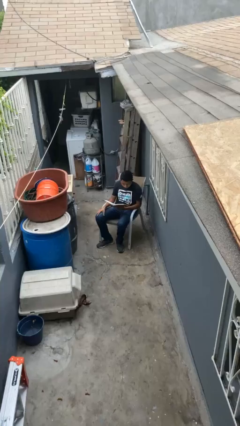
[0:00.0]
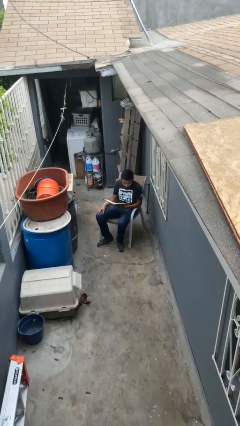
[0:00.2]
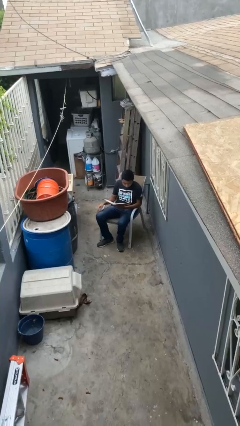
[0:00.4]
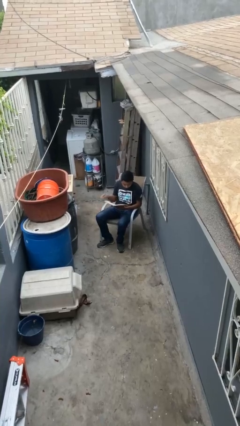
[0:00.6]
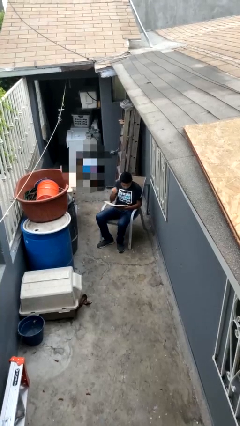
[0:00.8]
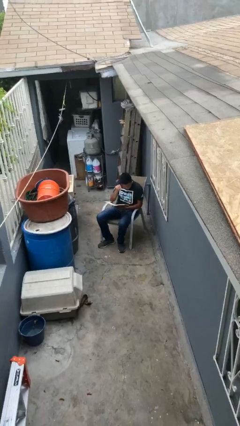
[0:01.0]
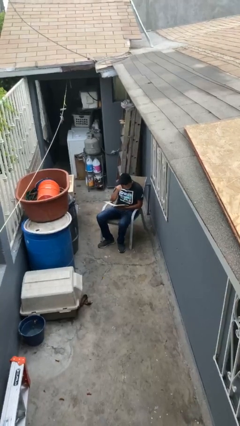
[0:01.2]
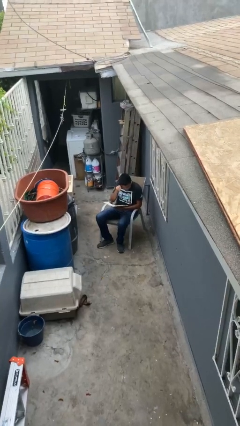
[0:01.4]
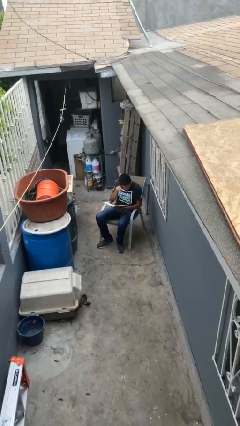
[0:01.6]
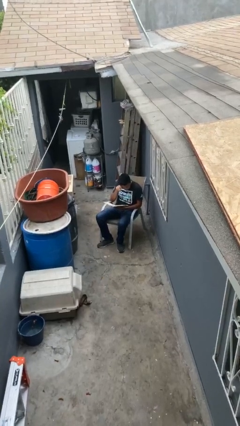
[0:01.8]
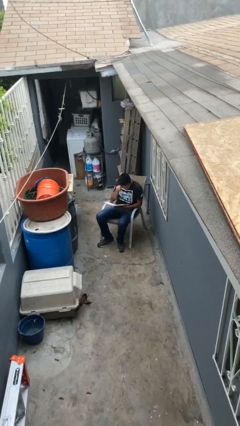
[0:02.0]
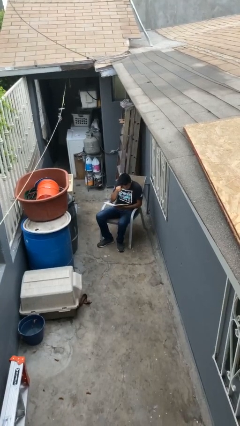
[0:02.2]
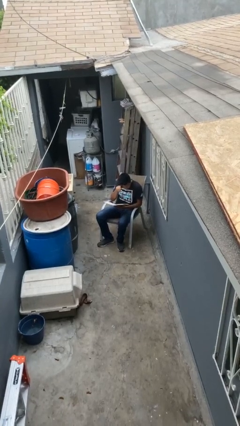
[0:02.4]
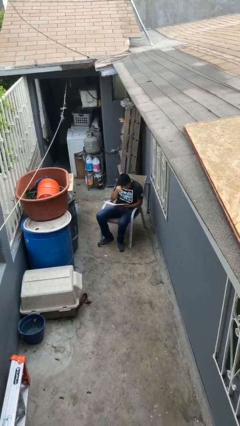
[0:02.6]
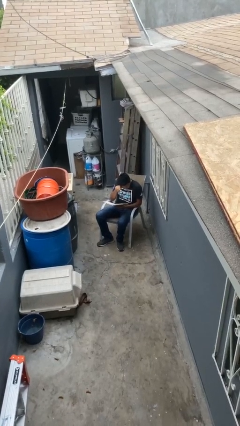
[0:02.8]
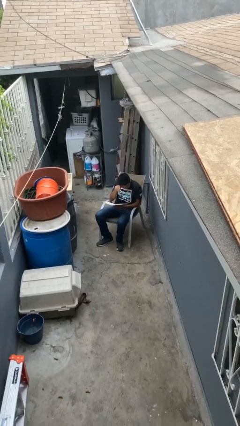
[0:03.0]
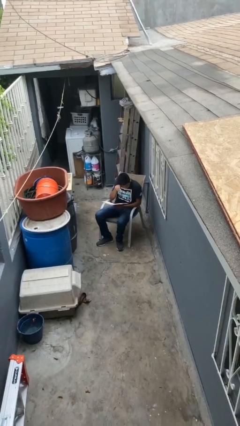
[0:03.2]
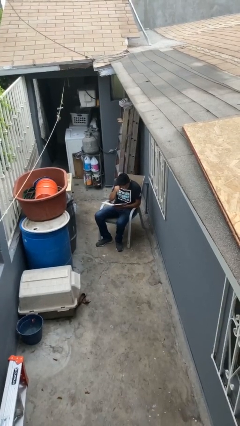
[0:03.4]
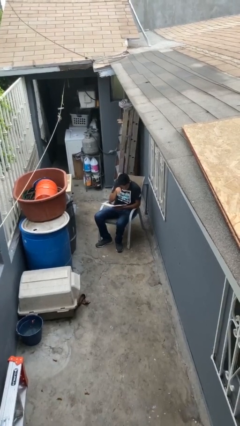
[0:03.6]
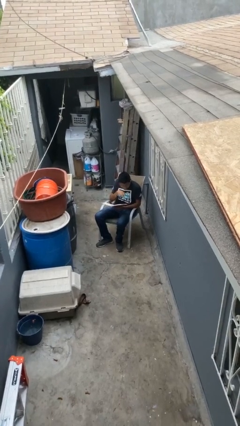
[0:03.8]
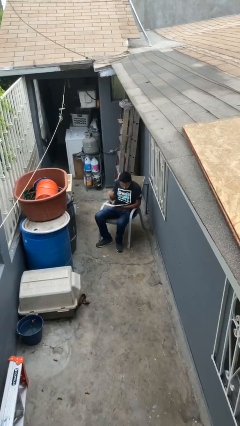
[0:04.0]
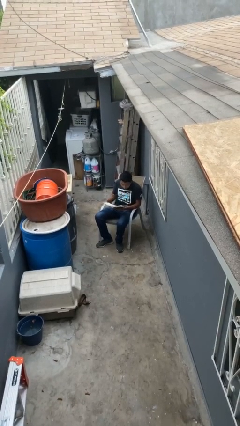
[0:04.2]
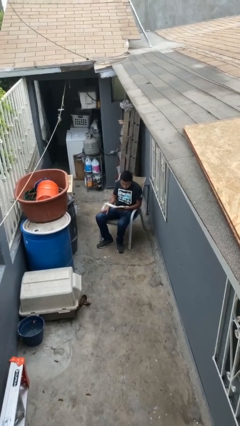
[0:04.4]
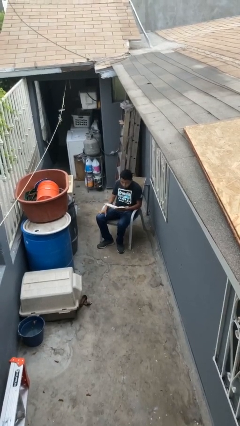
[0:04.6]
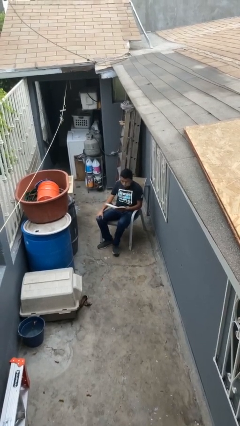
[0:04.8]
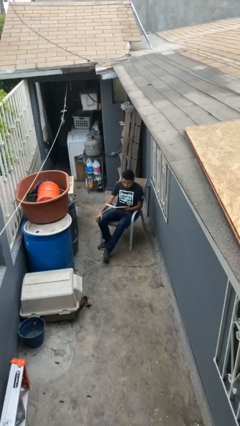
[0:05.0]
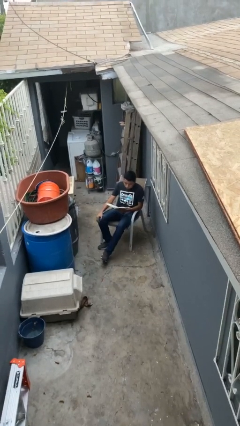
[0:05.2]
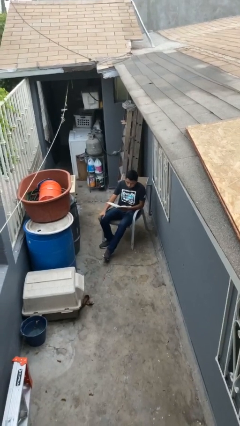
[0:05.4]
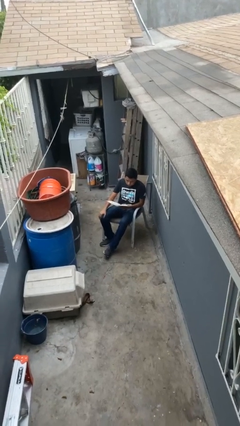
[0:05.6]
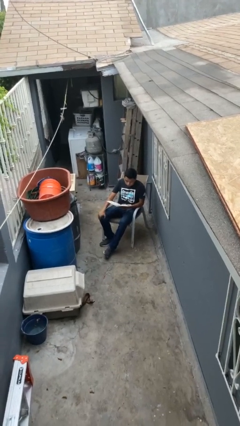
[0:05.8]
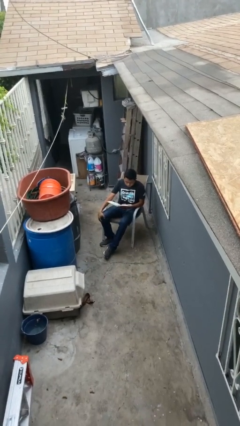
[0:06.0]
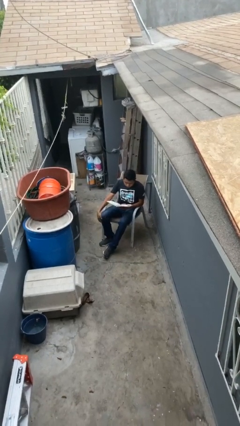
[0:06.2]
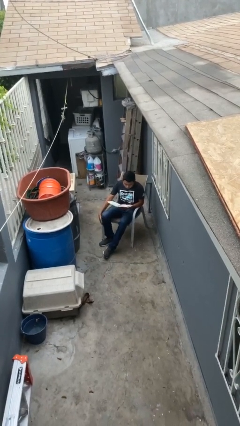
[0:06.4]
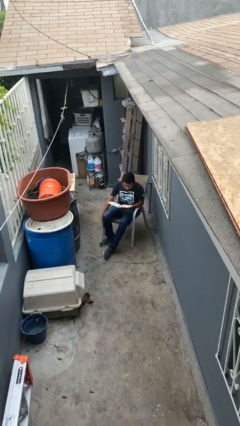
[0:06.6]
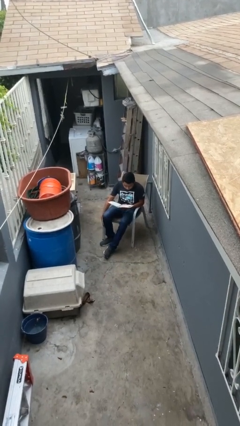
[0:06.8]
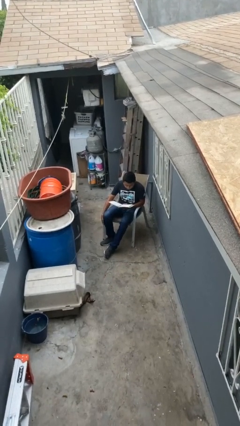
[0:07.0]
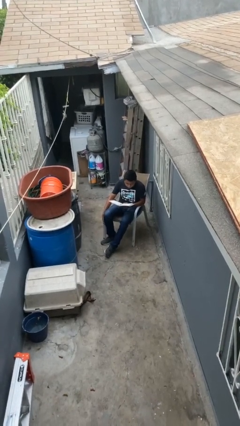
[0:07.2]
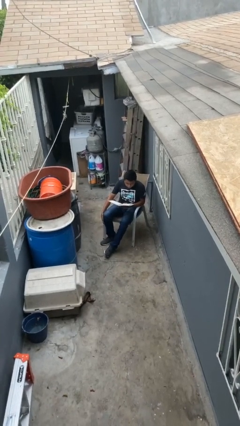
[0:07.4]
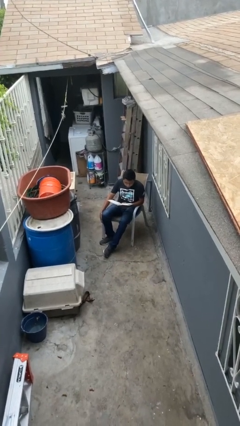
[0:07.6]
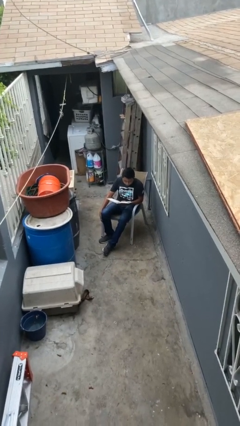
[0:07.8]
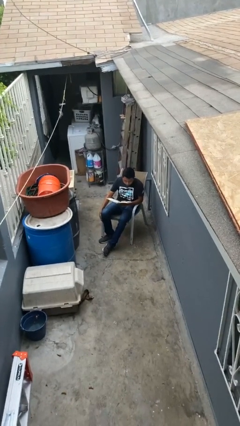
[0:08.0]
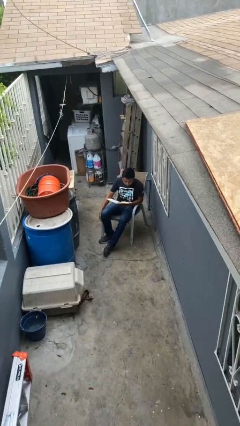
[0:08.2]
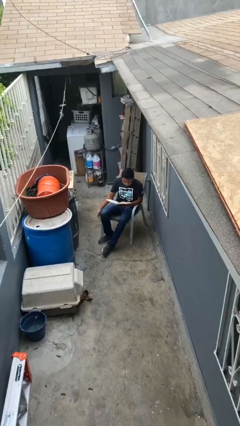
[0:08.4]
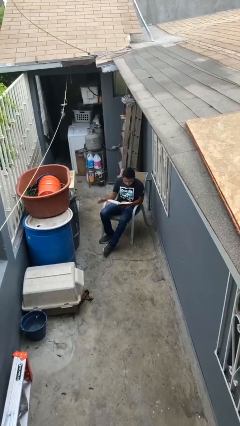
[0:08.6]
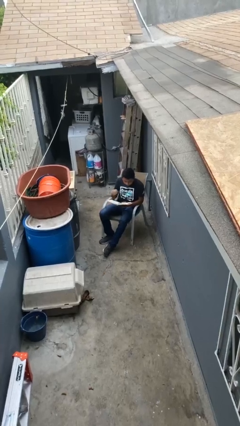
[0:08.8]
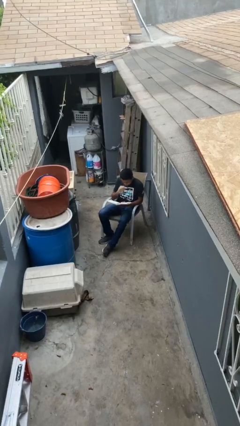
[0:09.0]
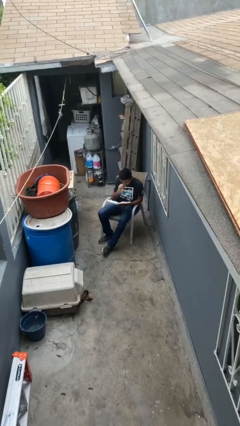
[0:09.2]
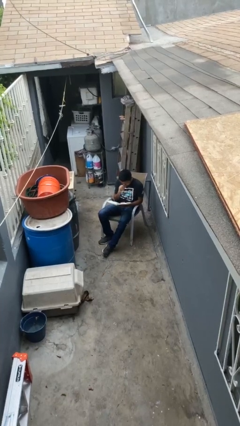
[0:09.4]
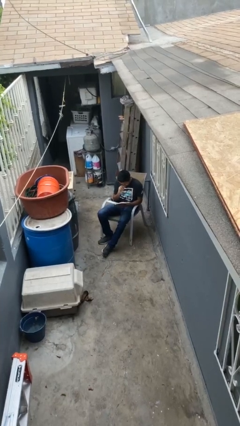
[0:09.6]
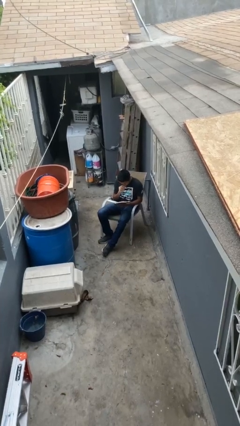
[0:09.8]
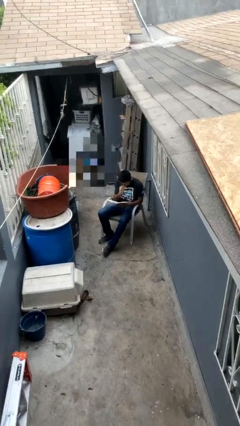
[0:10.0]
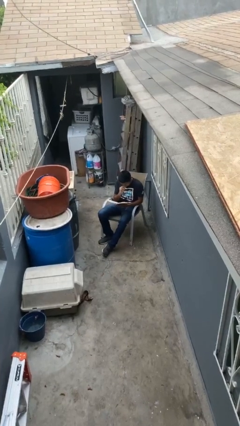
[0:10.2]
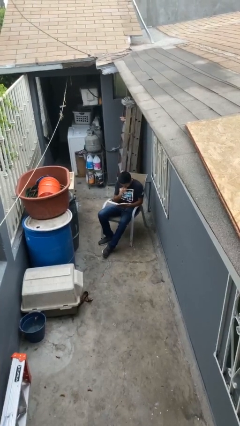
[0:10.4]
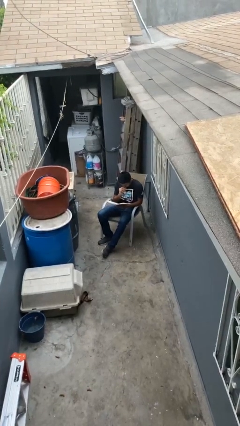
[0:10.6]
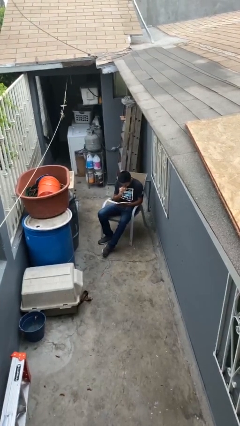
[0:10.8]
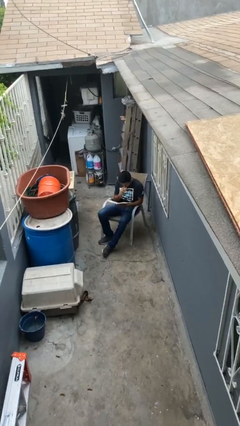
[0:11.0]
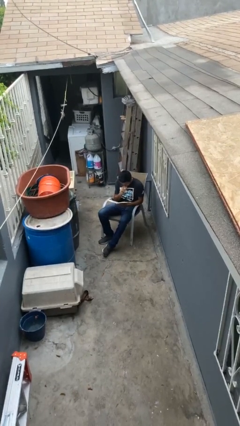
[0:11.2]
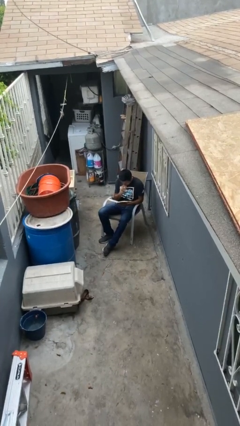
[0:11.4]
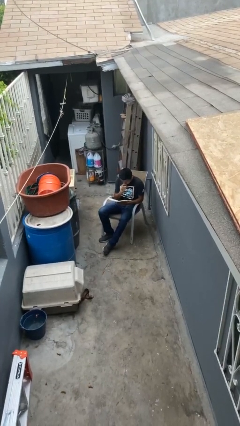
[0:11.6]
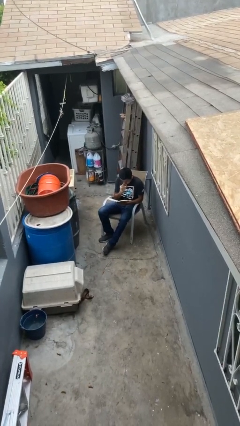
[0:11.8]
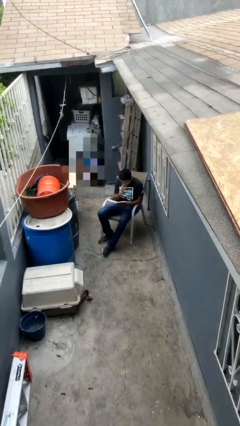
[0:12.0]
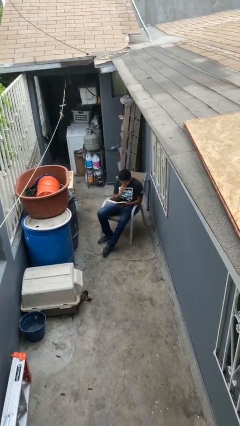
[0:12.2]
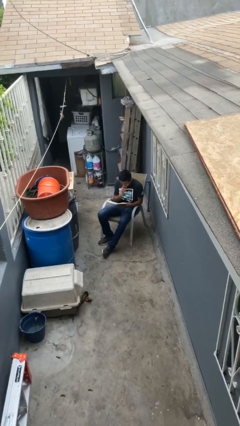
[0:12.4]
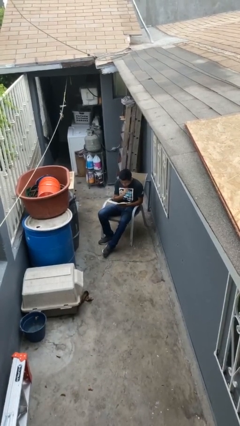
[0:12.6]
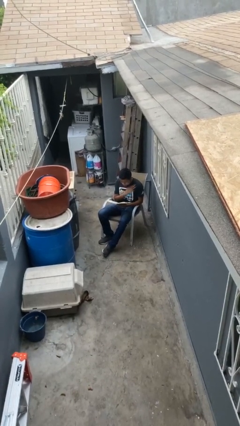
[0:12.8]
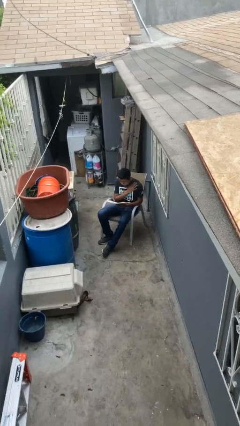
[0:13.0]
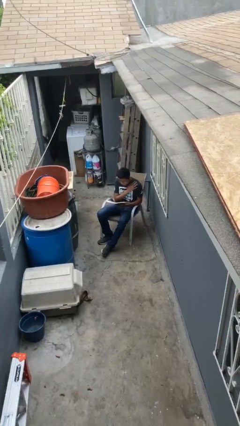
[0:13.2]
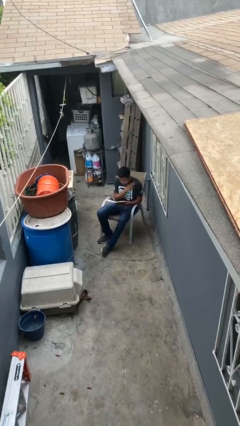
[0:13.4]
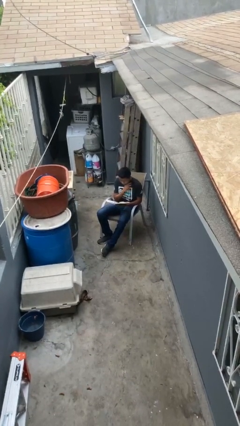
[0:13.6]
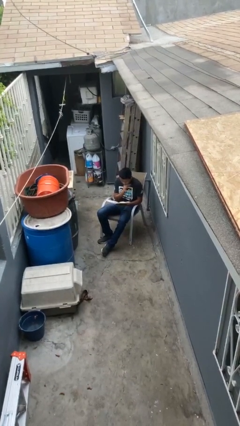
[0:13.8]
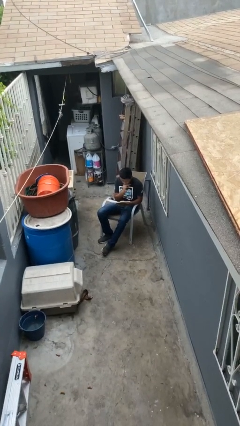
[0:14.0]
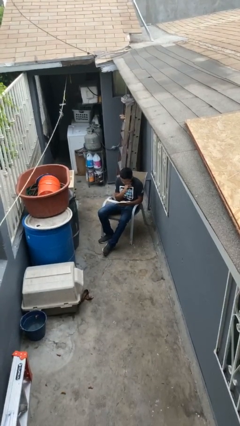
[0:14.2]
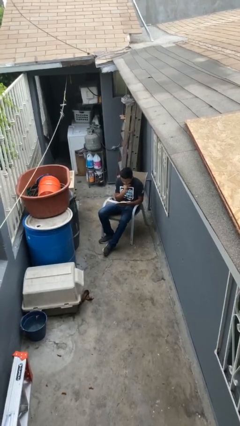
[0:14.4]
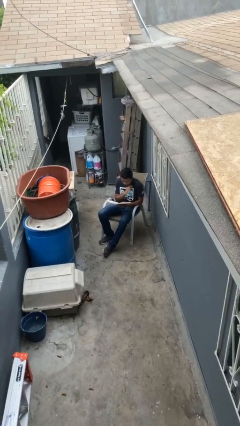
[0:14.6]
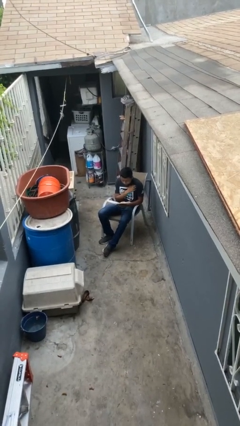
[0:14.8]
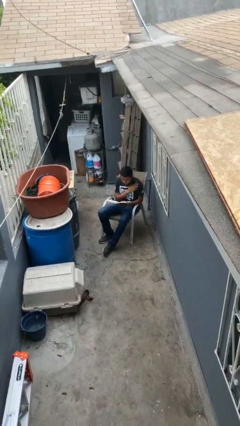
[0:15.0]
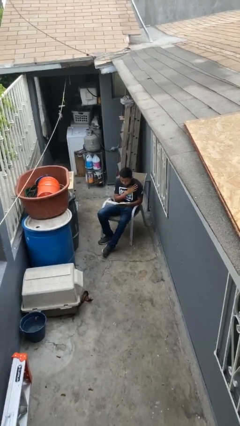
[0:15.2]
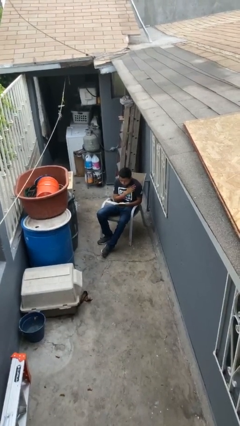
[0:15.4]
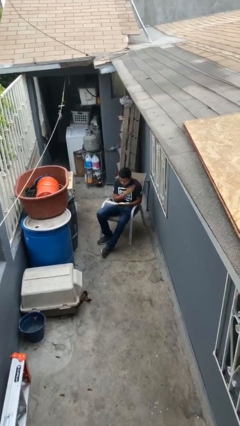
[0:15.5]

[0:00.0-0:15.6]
person reads document

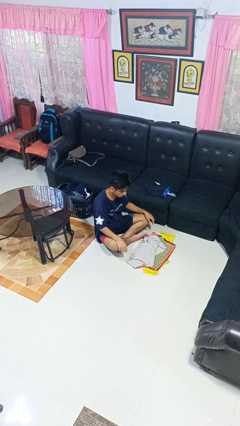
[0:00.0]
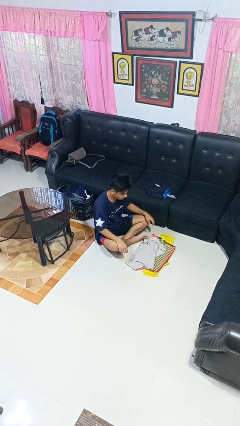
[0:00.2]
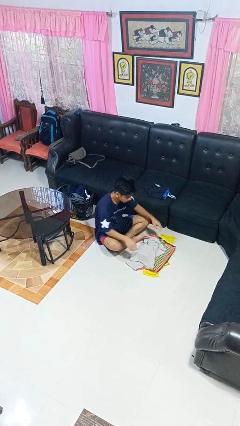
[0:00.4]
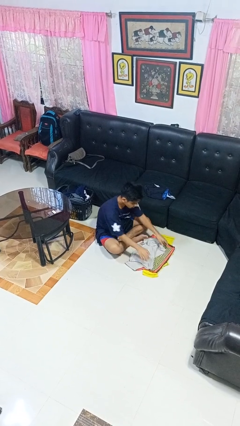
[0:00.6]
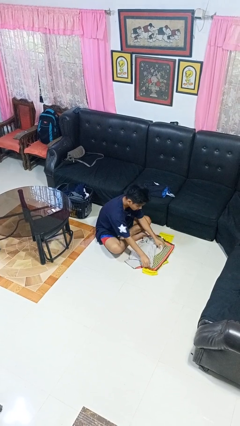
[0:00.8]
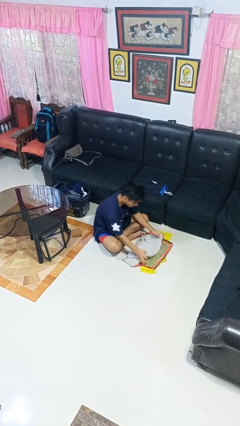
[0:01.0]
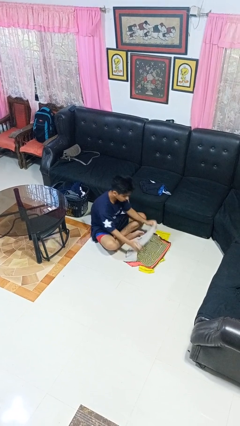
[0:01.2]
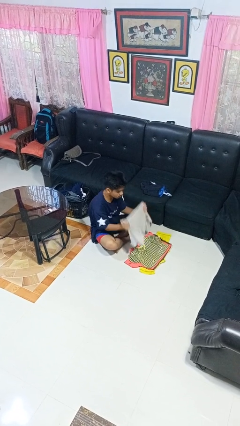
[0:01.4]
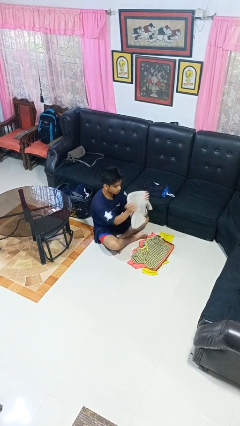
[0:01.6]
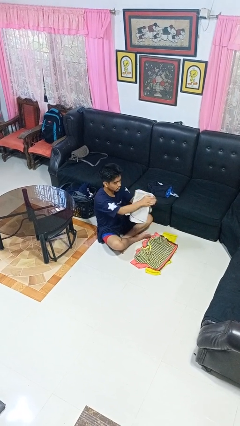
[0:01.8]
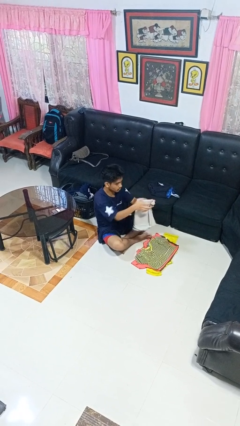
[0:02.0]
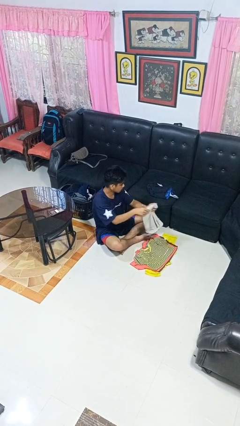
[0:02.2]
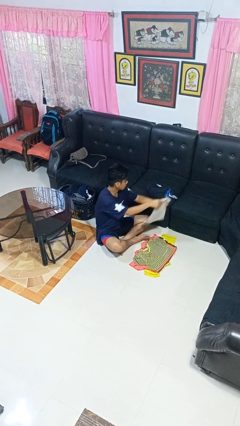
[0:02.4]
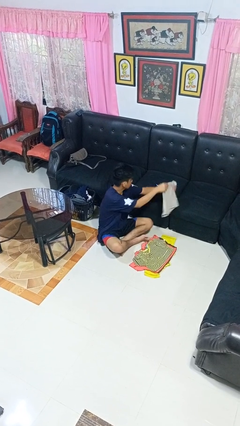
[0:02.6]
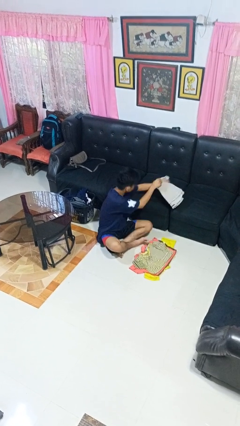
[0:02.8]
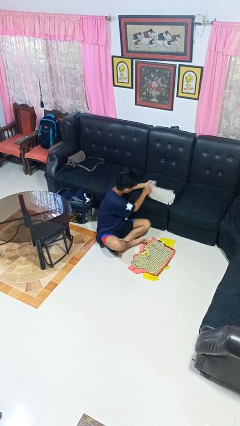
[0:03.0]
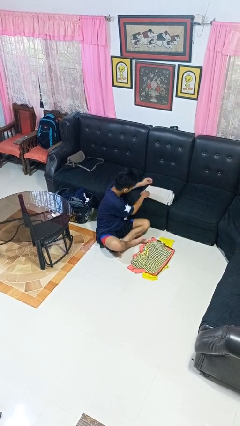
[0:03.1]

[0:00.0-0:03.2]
person folds shirt
